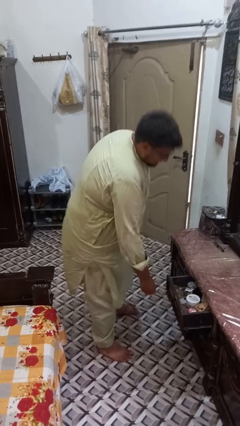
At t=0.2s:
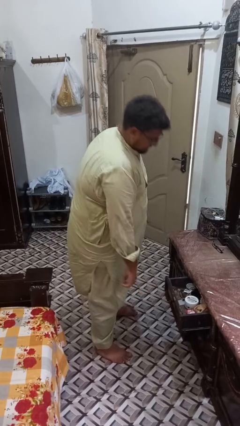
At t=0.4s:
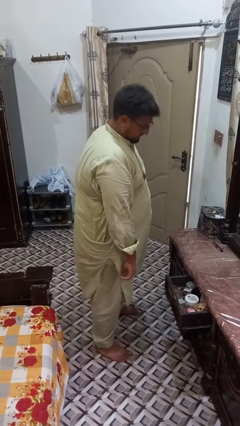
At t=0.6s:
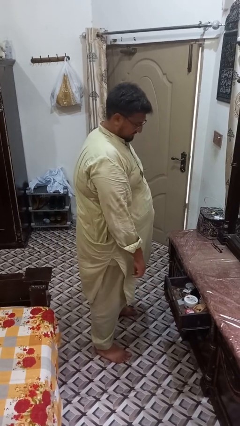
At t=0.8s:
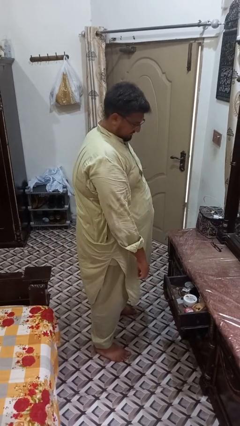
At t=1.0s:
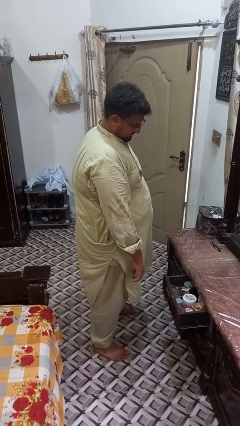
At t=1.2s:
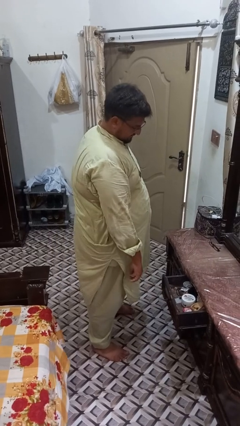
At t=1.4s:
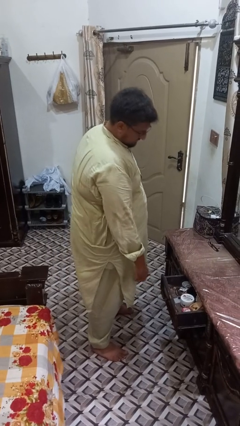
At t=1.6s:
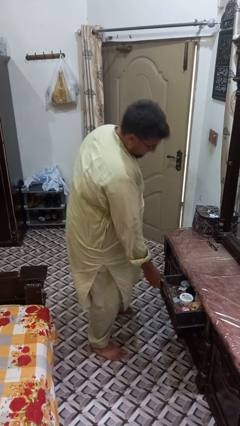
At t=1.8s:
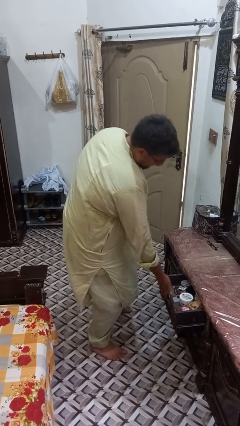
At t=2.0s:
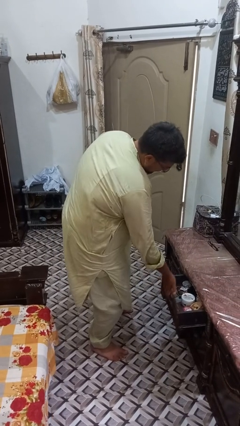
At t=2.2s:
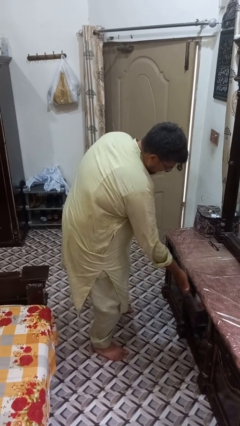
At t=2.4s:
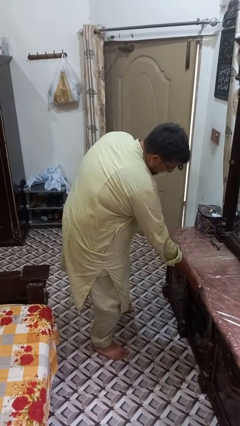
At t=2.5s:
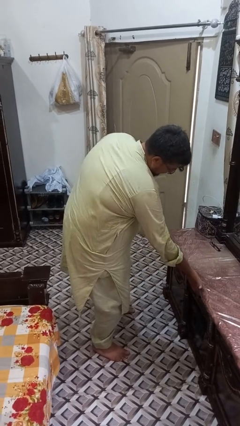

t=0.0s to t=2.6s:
person closes dresser drawer

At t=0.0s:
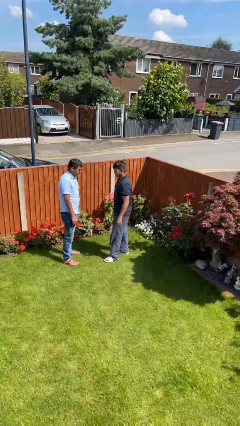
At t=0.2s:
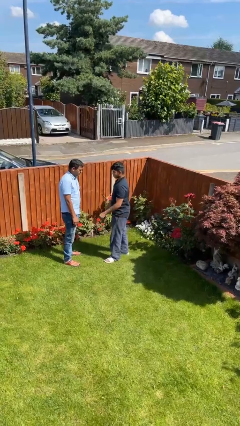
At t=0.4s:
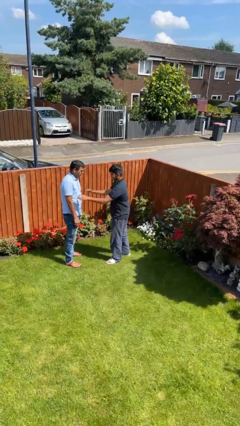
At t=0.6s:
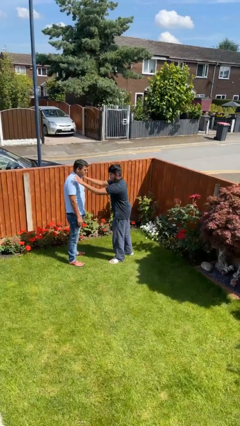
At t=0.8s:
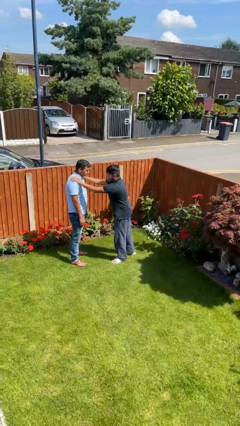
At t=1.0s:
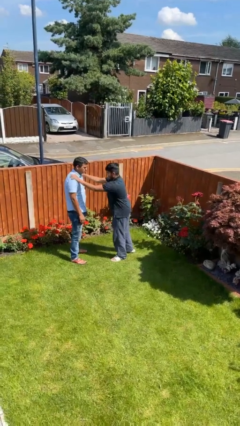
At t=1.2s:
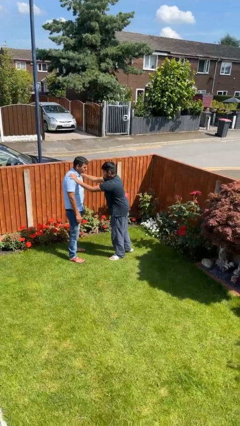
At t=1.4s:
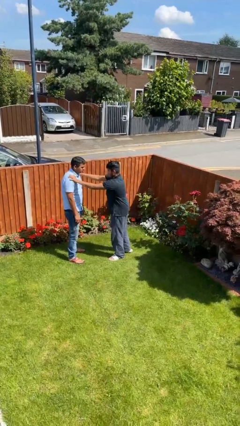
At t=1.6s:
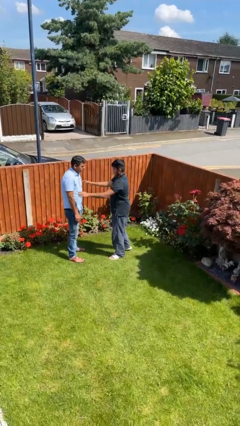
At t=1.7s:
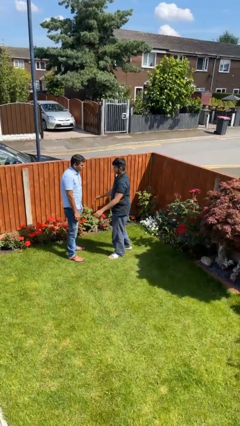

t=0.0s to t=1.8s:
person pounds shoulders of person

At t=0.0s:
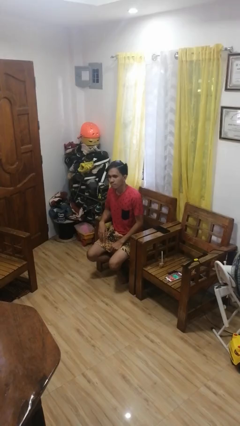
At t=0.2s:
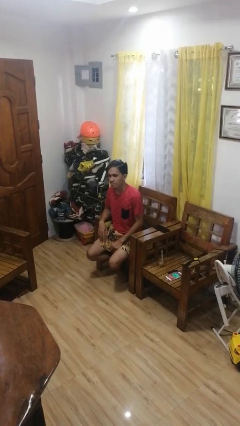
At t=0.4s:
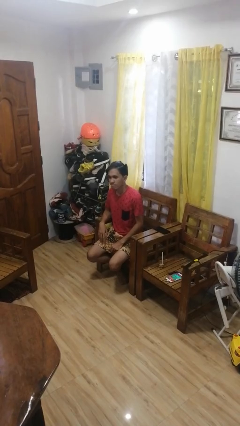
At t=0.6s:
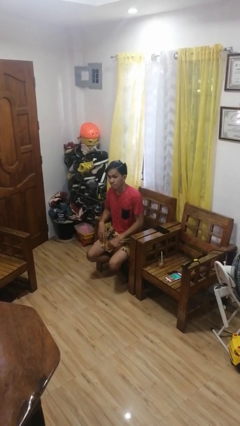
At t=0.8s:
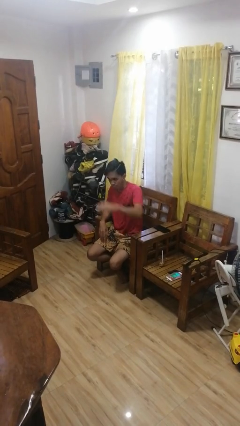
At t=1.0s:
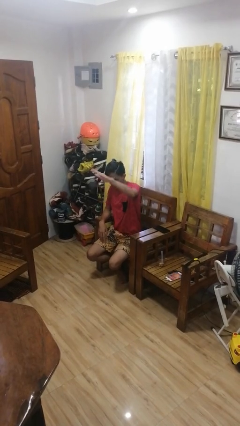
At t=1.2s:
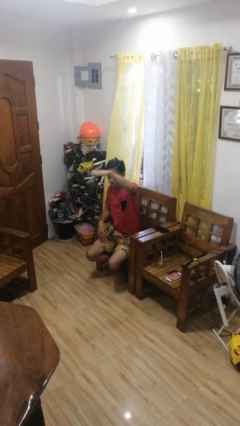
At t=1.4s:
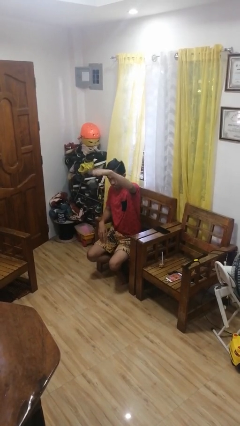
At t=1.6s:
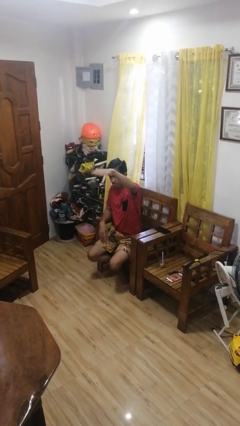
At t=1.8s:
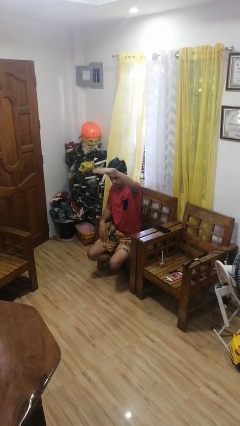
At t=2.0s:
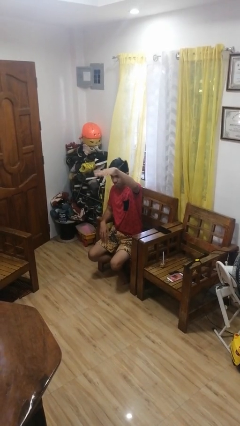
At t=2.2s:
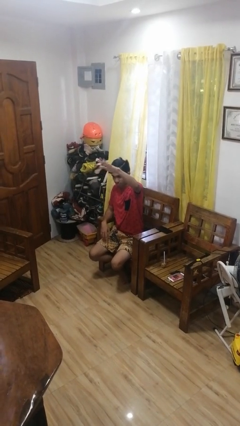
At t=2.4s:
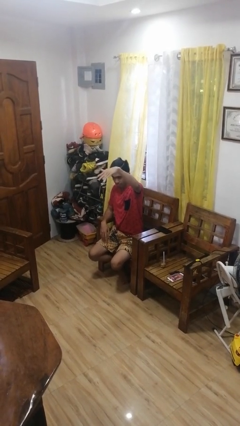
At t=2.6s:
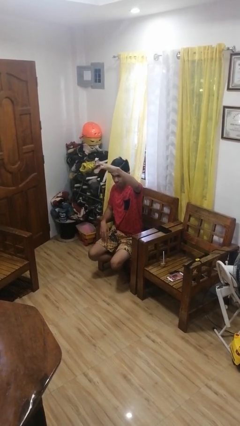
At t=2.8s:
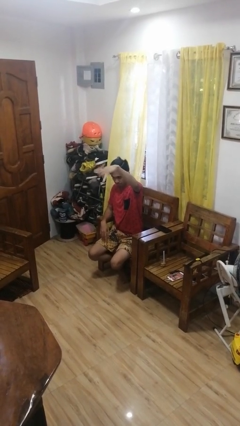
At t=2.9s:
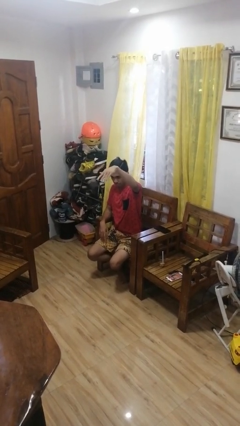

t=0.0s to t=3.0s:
person gestures come here

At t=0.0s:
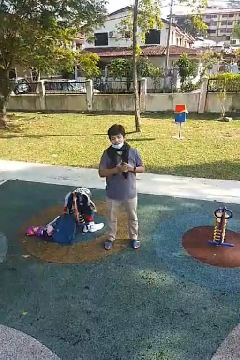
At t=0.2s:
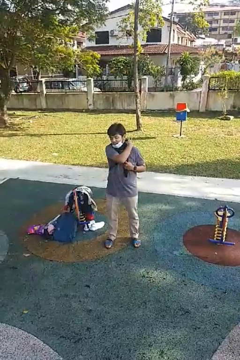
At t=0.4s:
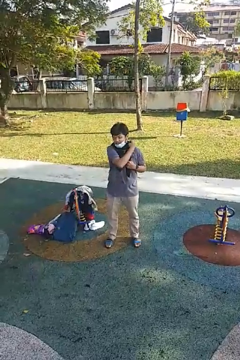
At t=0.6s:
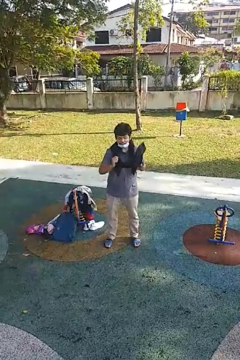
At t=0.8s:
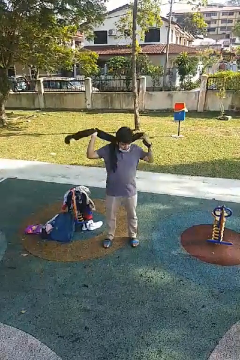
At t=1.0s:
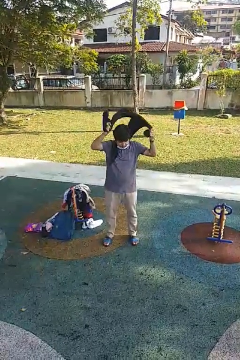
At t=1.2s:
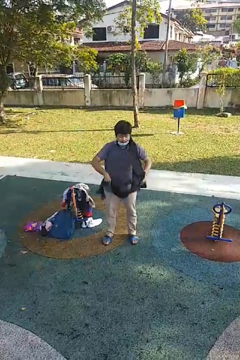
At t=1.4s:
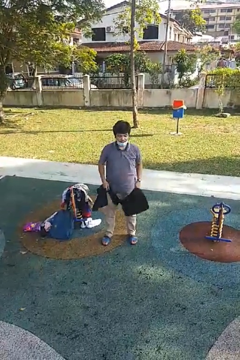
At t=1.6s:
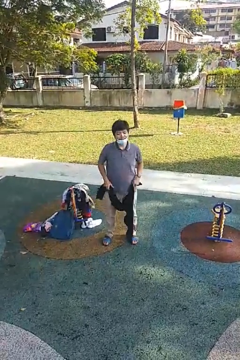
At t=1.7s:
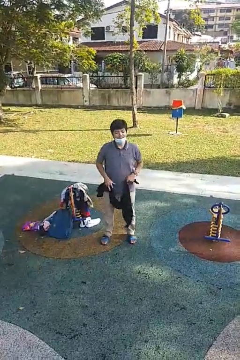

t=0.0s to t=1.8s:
person takes off scarf

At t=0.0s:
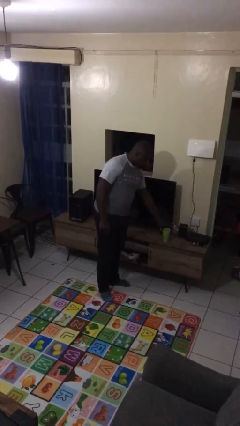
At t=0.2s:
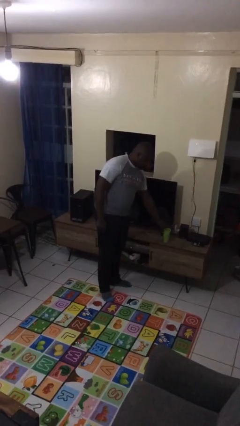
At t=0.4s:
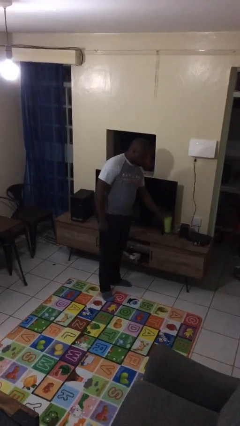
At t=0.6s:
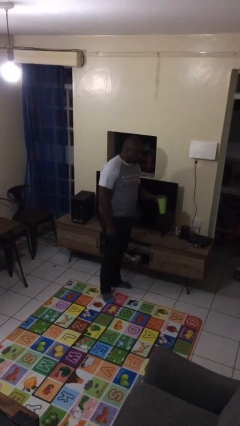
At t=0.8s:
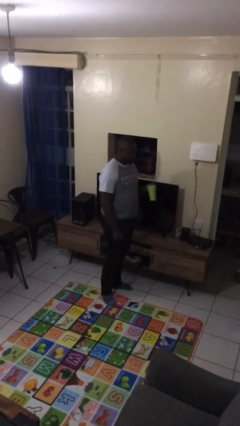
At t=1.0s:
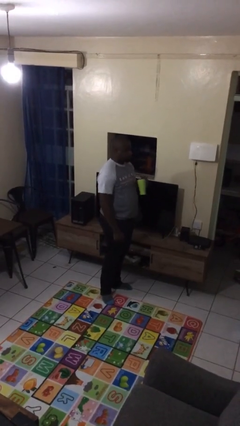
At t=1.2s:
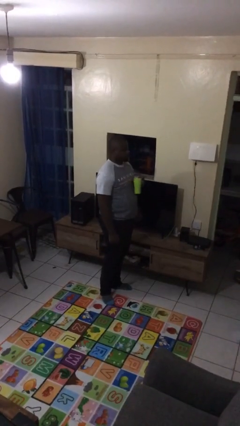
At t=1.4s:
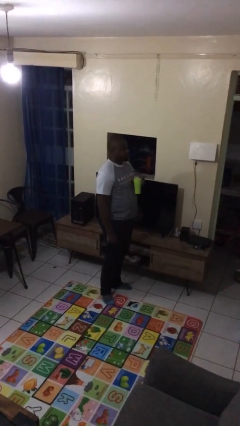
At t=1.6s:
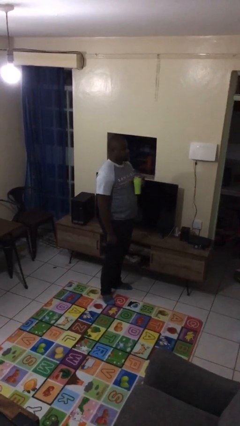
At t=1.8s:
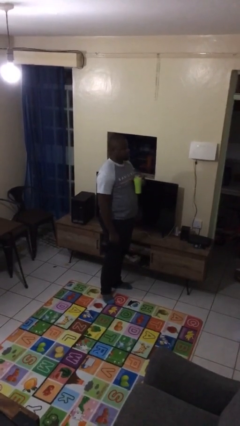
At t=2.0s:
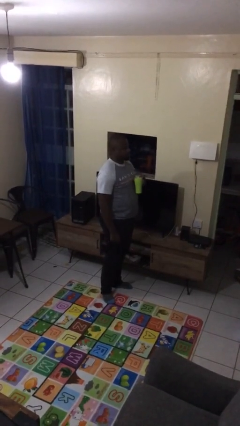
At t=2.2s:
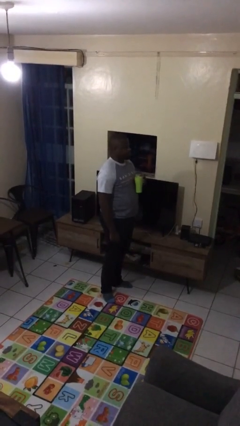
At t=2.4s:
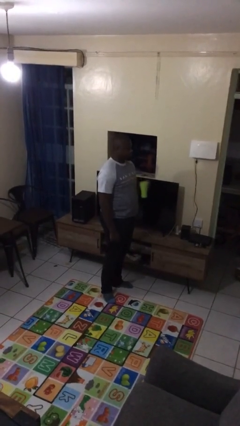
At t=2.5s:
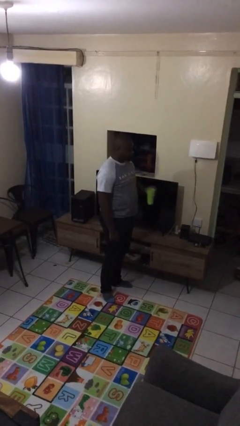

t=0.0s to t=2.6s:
person picks up object from countertop

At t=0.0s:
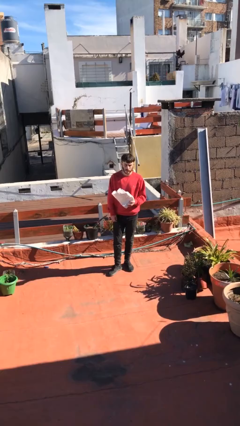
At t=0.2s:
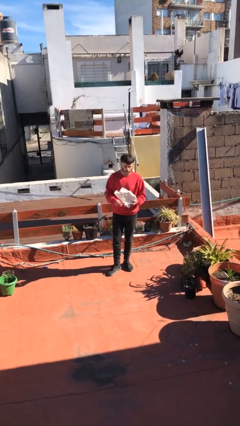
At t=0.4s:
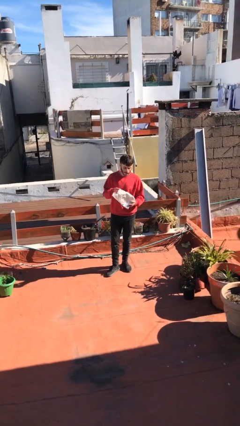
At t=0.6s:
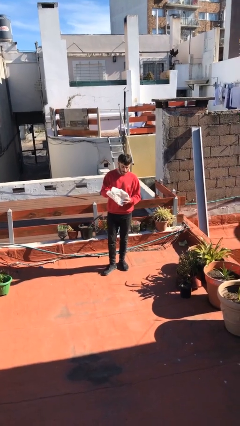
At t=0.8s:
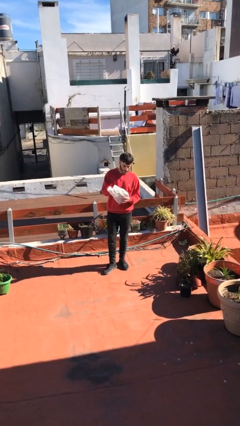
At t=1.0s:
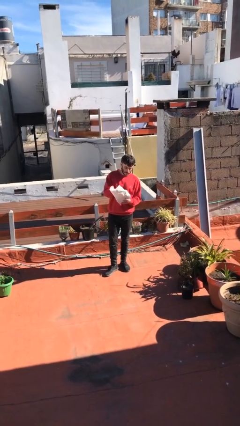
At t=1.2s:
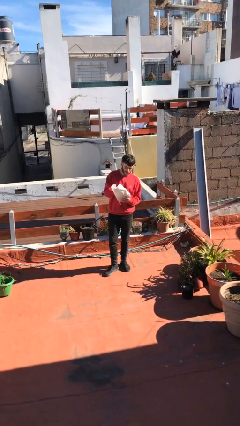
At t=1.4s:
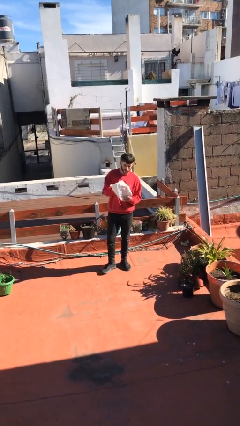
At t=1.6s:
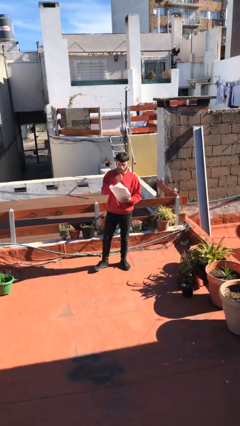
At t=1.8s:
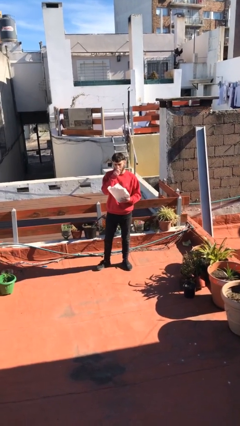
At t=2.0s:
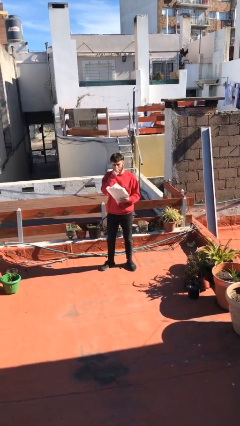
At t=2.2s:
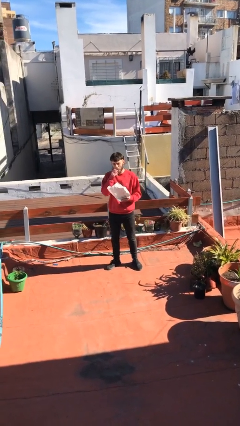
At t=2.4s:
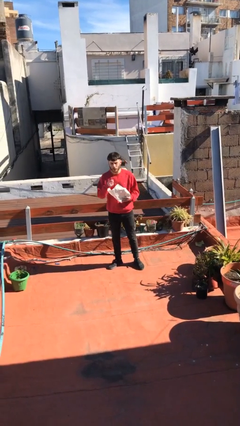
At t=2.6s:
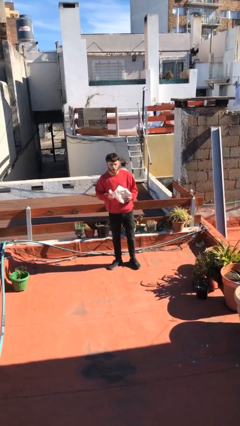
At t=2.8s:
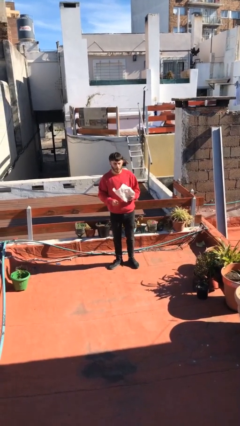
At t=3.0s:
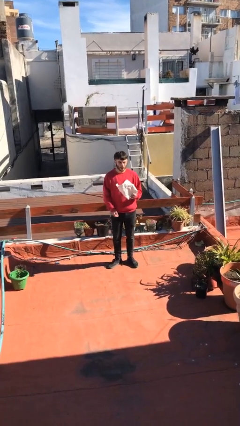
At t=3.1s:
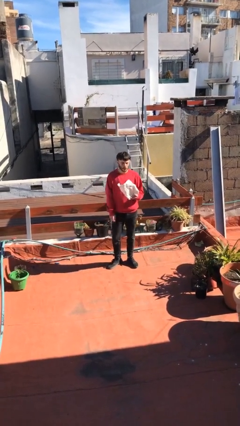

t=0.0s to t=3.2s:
person eats snack from bag

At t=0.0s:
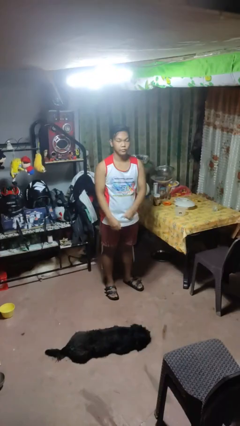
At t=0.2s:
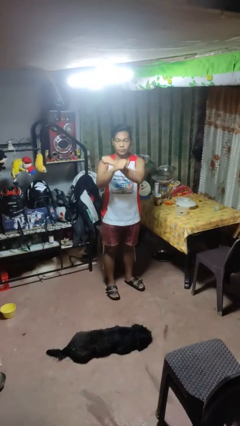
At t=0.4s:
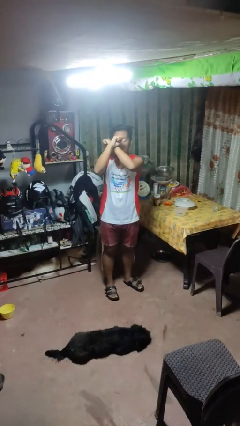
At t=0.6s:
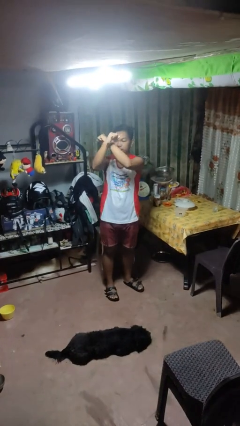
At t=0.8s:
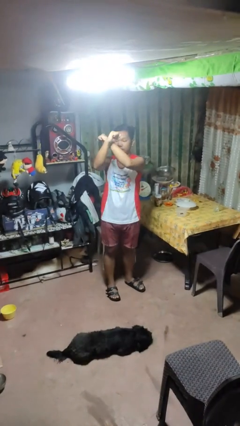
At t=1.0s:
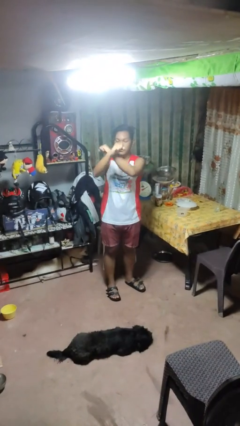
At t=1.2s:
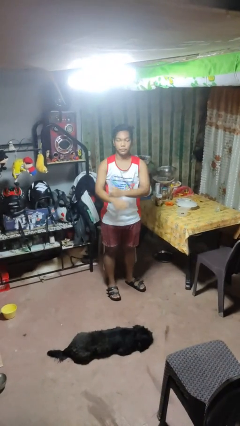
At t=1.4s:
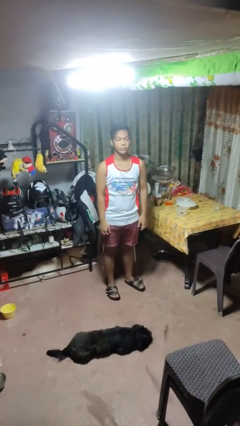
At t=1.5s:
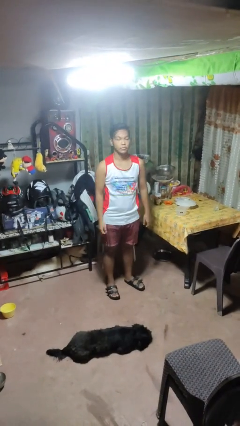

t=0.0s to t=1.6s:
person gestures arms x

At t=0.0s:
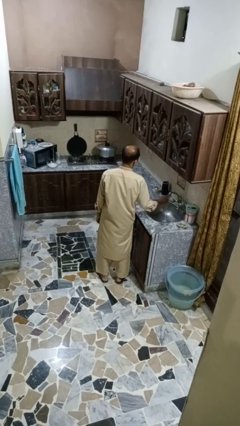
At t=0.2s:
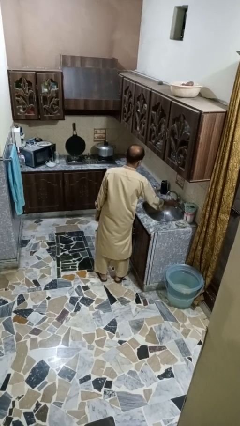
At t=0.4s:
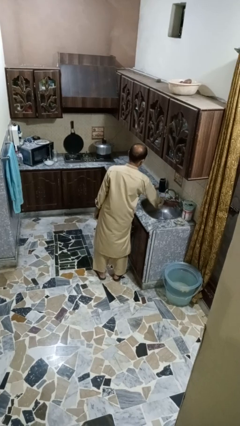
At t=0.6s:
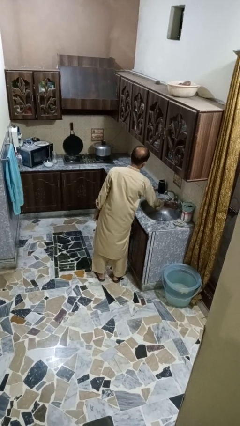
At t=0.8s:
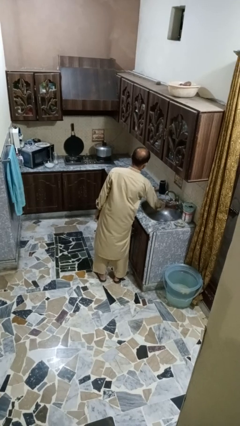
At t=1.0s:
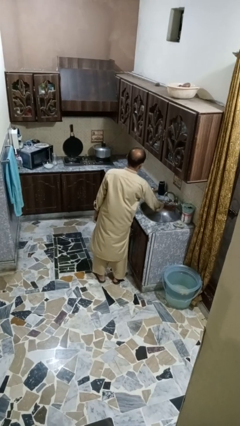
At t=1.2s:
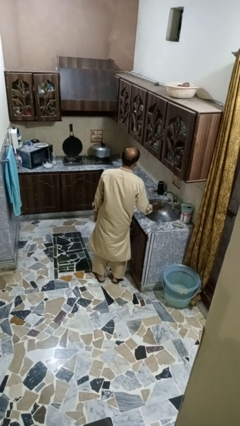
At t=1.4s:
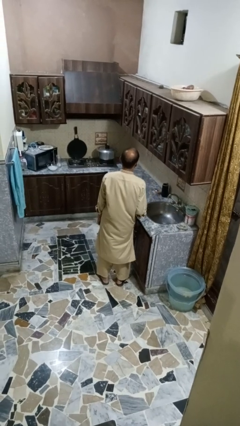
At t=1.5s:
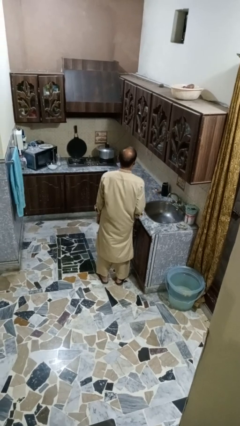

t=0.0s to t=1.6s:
person turns off faucet
